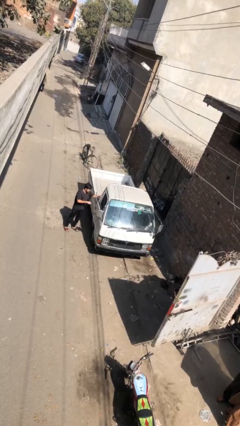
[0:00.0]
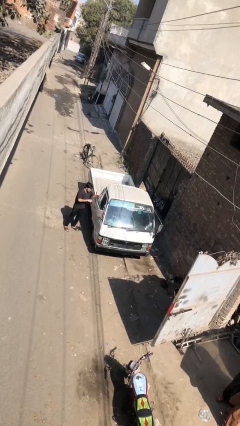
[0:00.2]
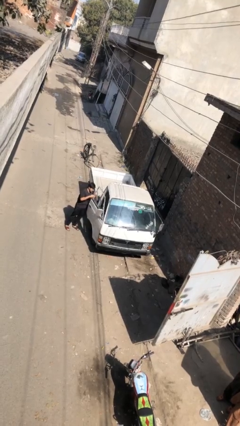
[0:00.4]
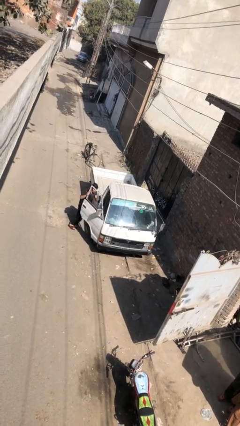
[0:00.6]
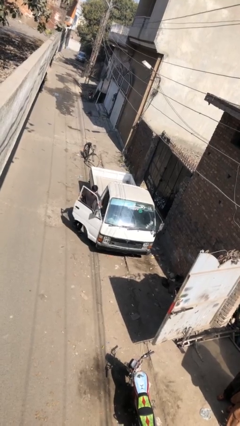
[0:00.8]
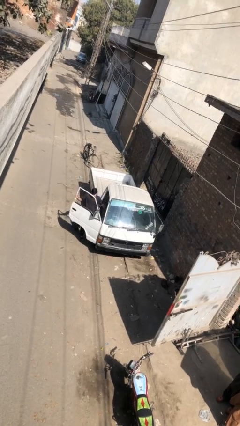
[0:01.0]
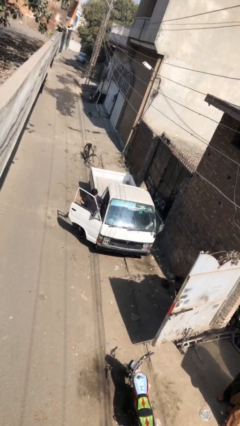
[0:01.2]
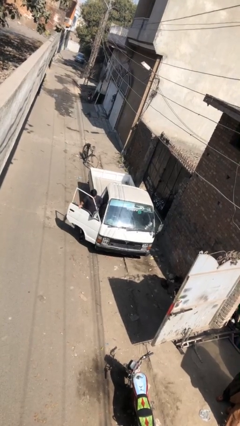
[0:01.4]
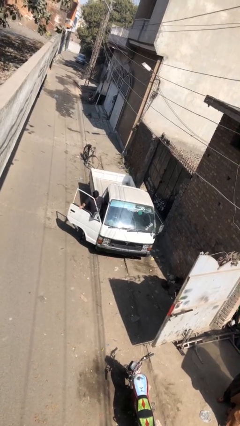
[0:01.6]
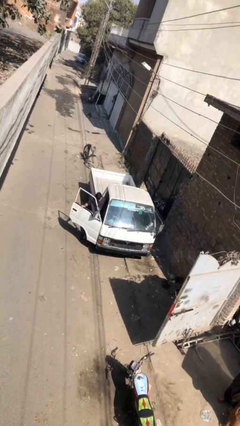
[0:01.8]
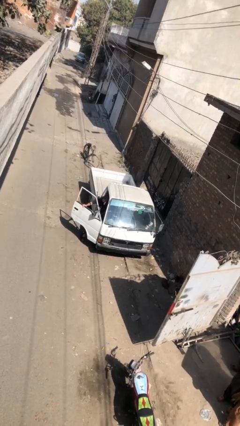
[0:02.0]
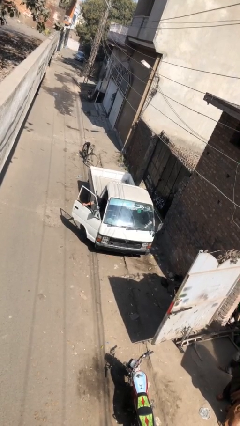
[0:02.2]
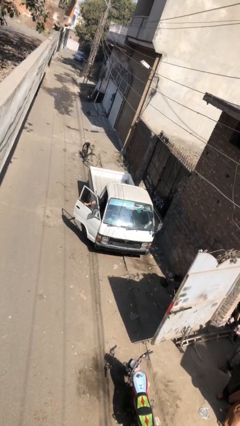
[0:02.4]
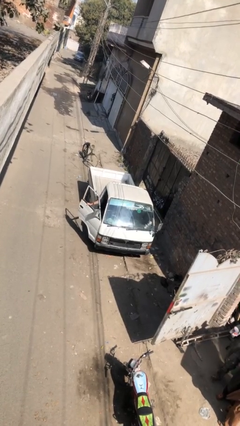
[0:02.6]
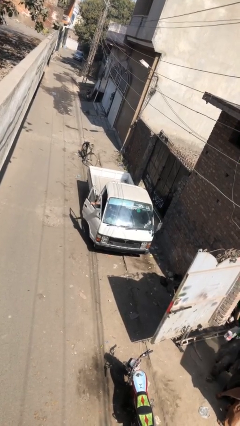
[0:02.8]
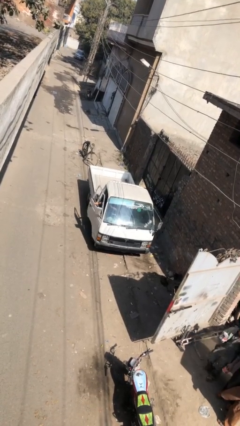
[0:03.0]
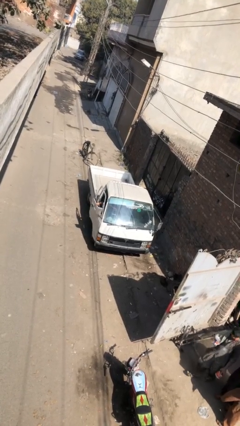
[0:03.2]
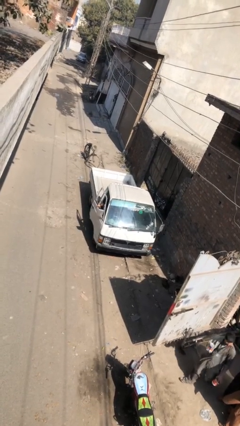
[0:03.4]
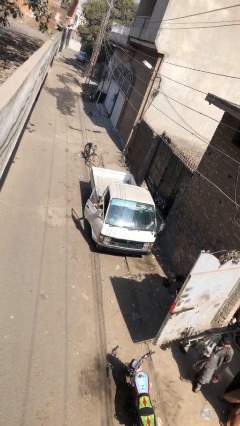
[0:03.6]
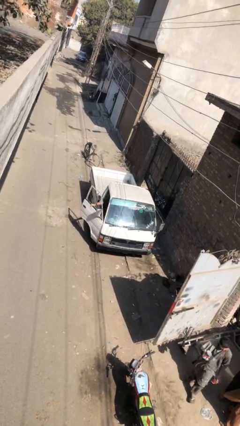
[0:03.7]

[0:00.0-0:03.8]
car picks up person

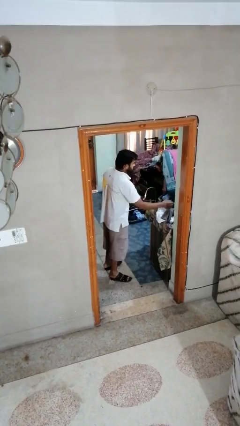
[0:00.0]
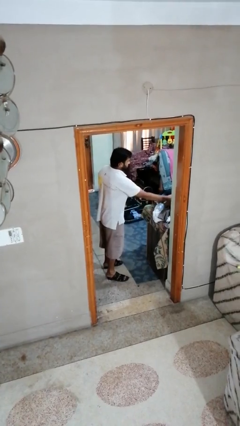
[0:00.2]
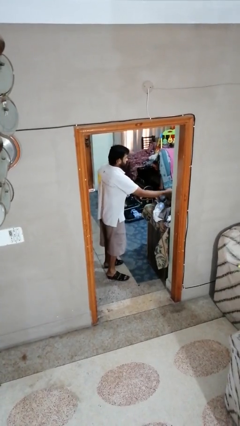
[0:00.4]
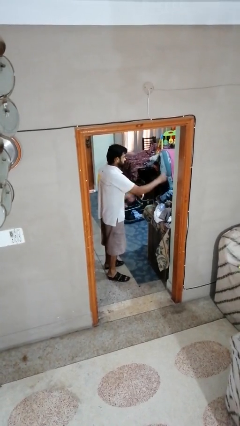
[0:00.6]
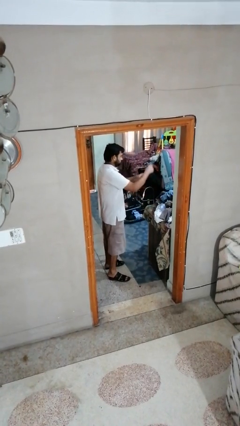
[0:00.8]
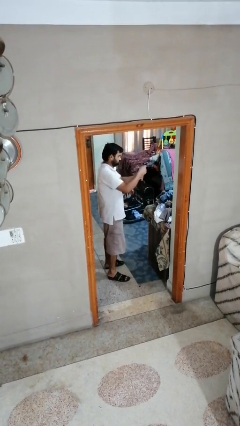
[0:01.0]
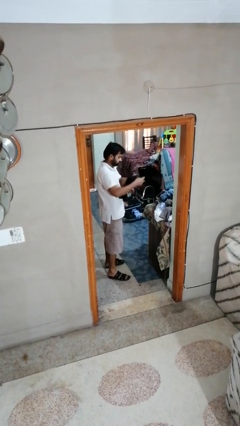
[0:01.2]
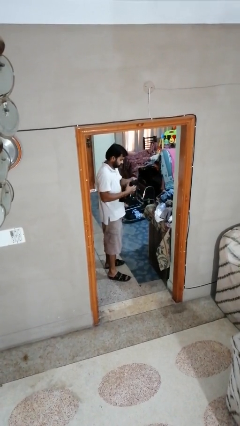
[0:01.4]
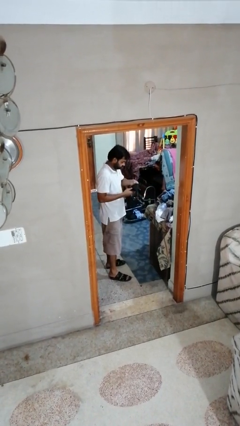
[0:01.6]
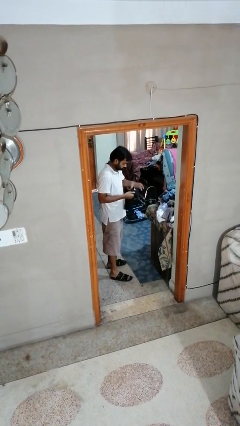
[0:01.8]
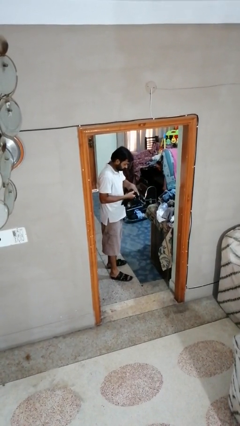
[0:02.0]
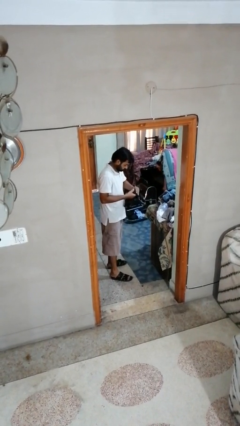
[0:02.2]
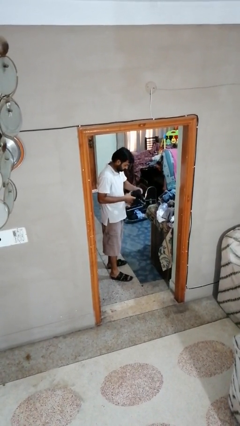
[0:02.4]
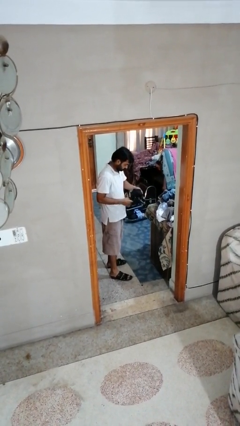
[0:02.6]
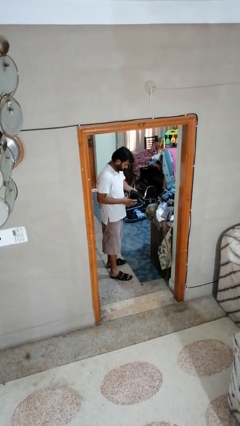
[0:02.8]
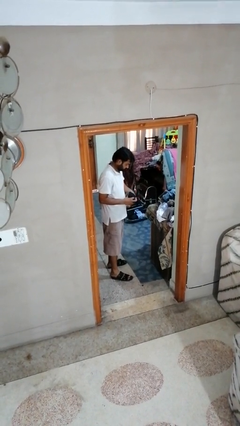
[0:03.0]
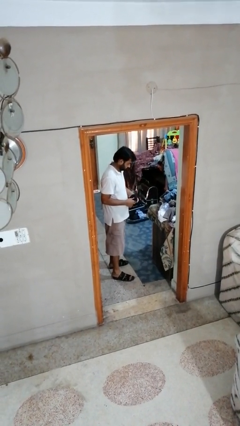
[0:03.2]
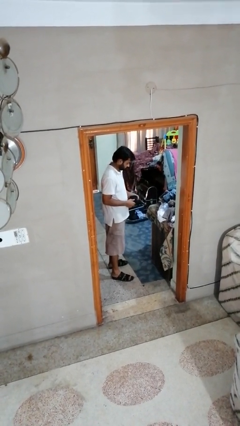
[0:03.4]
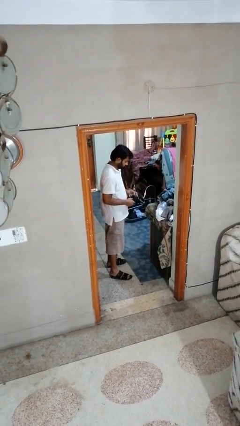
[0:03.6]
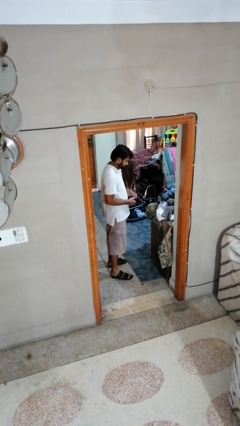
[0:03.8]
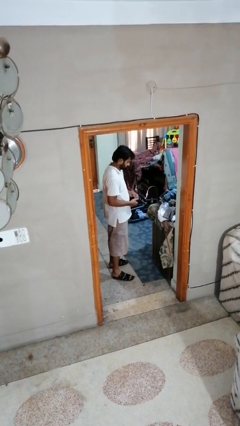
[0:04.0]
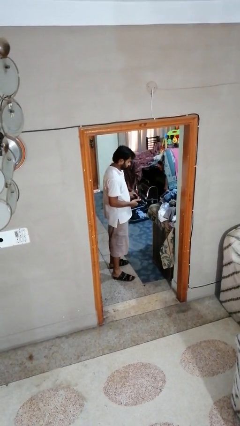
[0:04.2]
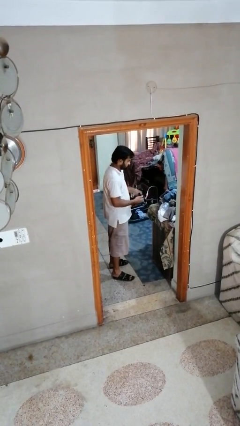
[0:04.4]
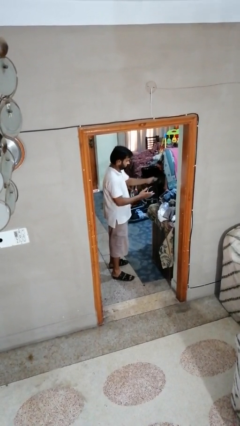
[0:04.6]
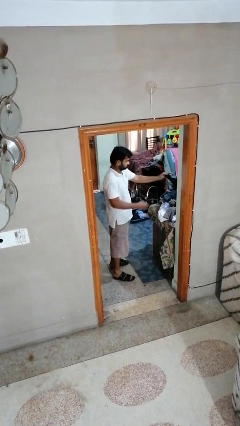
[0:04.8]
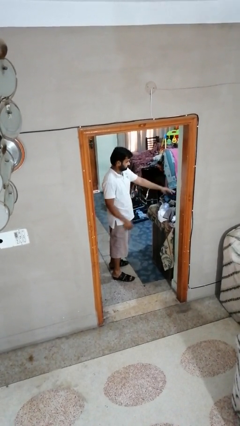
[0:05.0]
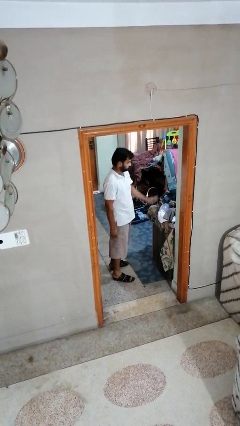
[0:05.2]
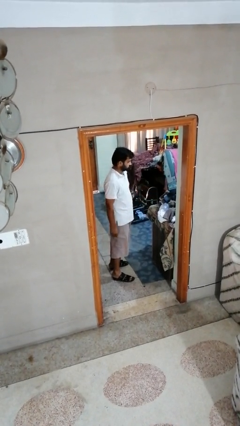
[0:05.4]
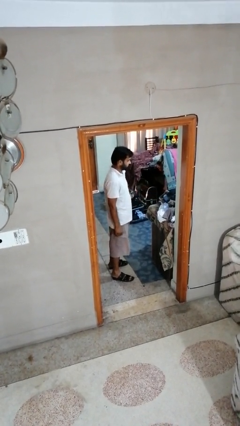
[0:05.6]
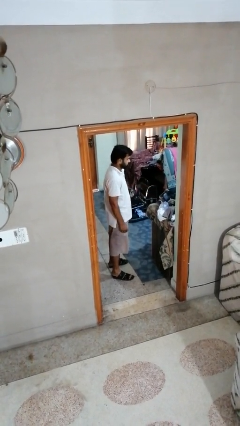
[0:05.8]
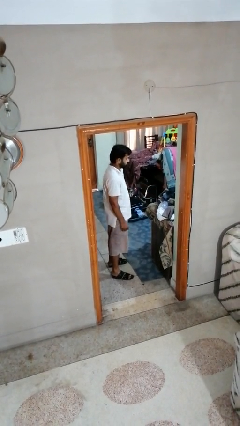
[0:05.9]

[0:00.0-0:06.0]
person folds socks

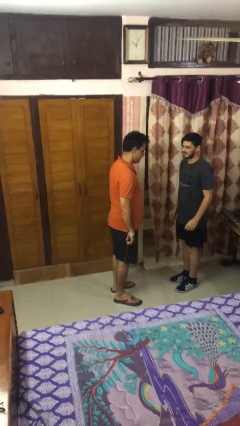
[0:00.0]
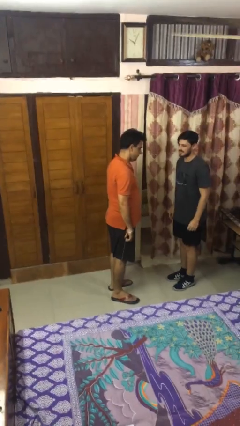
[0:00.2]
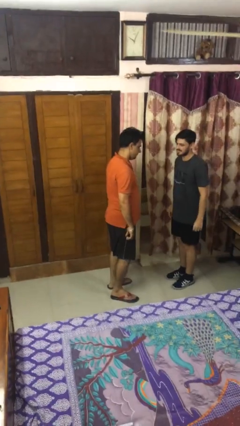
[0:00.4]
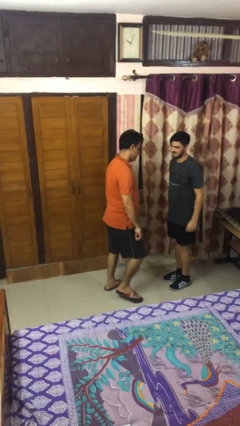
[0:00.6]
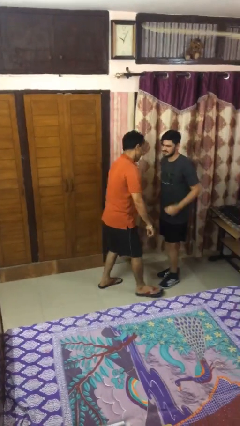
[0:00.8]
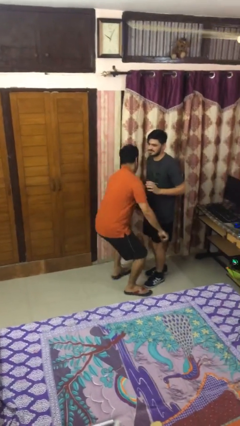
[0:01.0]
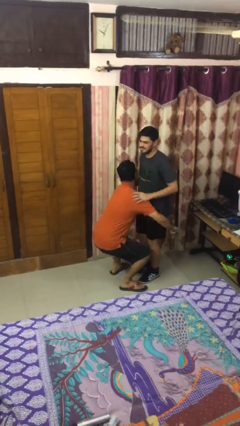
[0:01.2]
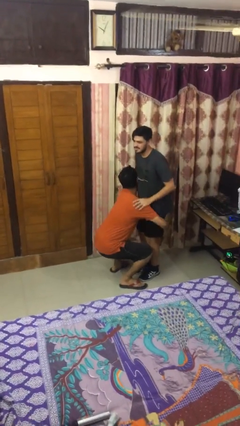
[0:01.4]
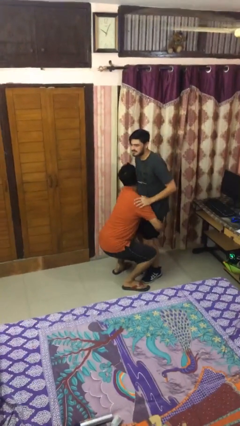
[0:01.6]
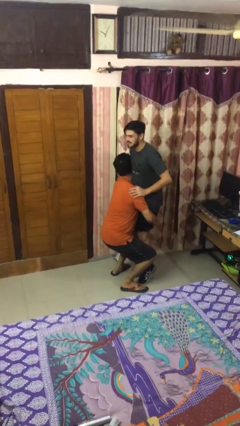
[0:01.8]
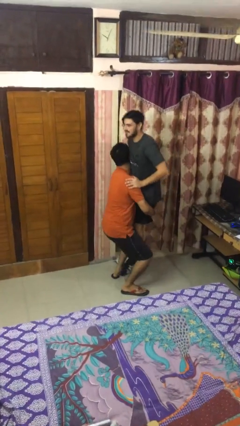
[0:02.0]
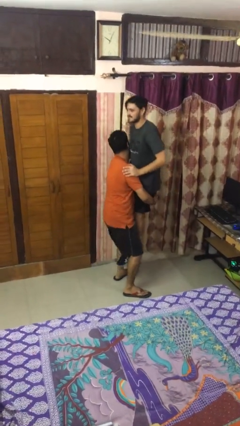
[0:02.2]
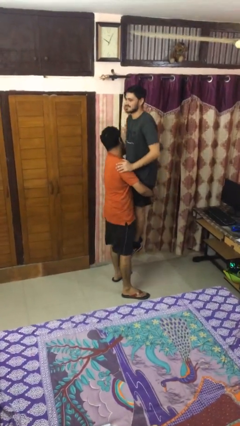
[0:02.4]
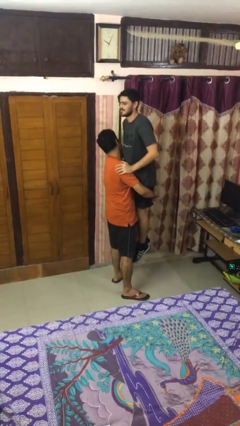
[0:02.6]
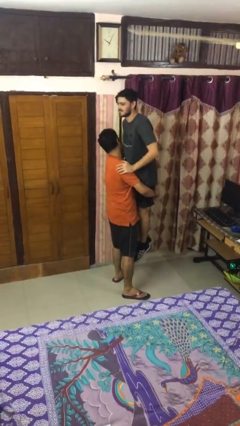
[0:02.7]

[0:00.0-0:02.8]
person picks up person

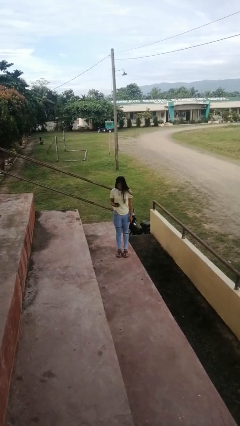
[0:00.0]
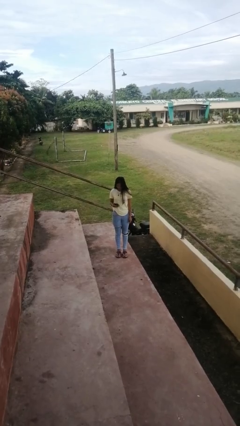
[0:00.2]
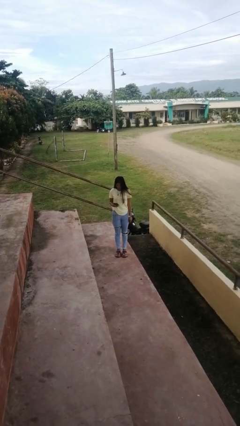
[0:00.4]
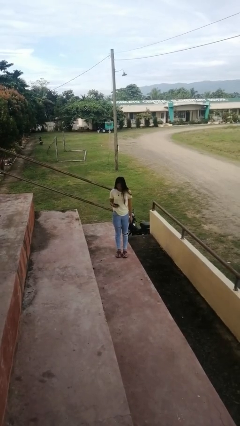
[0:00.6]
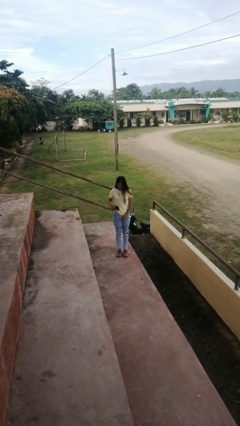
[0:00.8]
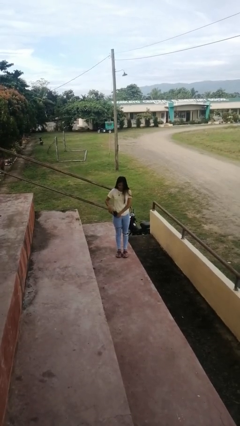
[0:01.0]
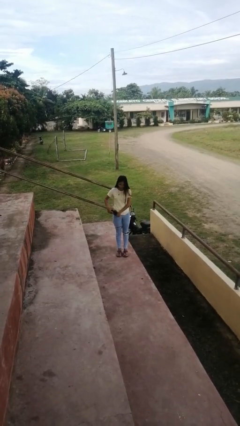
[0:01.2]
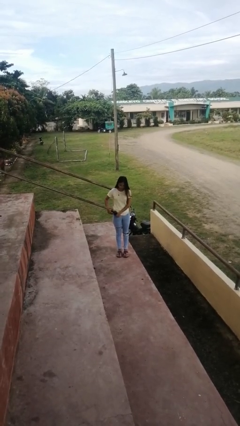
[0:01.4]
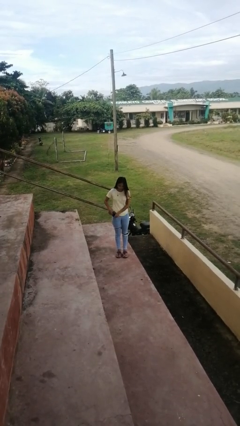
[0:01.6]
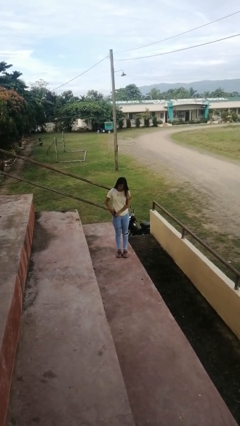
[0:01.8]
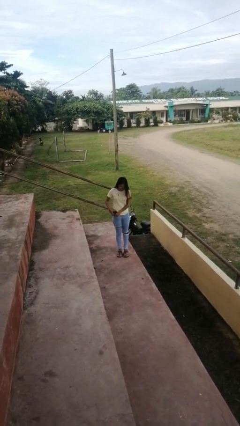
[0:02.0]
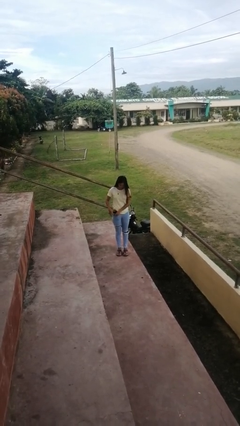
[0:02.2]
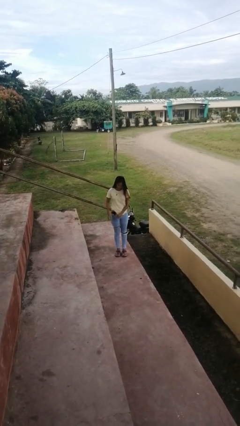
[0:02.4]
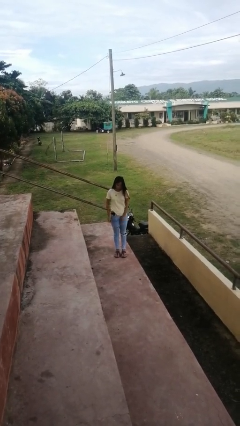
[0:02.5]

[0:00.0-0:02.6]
person puts phone into pocket

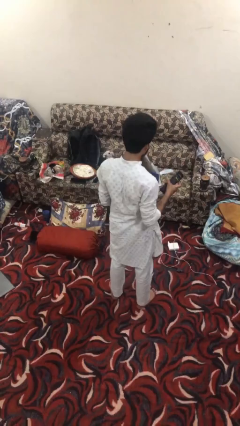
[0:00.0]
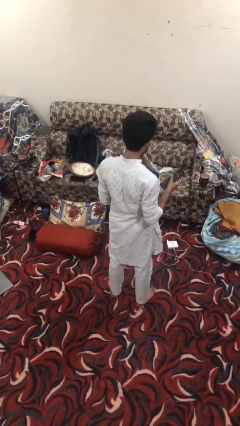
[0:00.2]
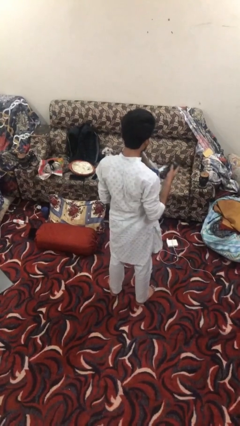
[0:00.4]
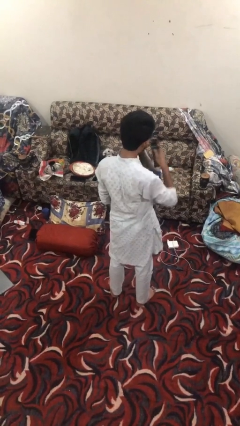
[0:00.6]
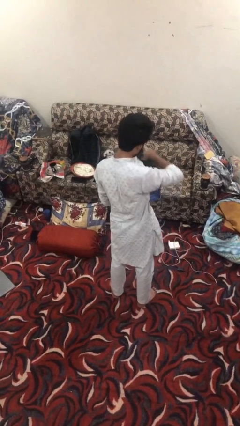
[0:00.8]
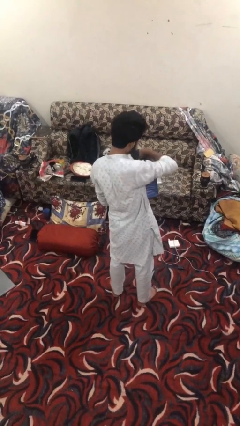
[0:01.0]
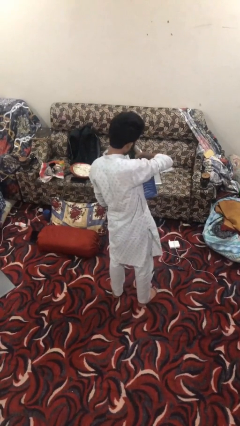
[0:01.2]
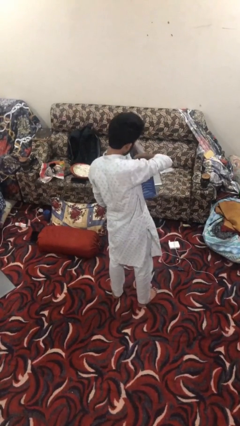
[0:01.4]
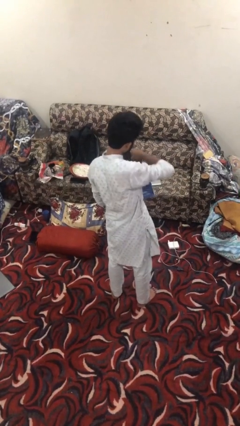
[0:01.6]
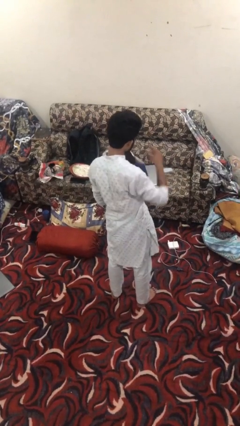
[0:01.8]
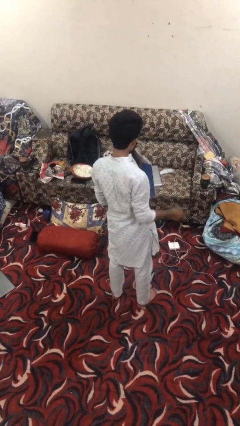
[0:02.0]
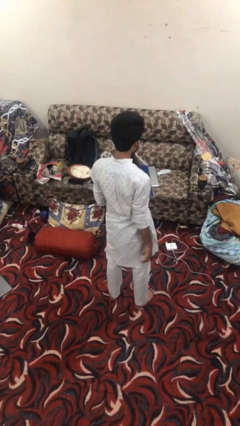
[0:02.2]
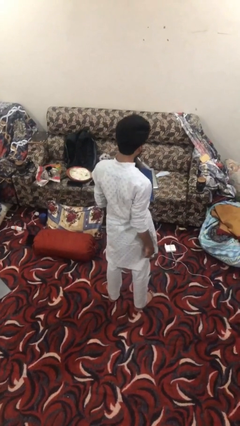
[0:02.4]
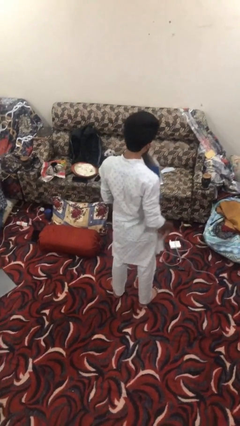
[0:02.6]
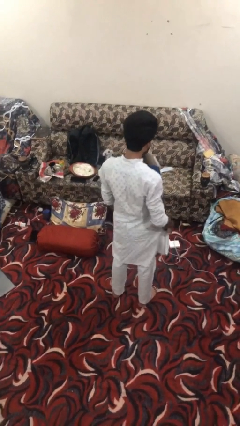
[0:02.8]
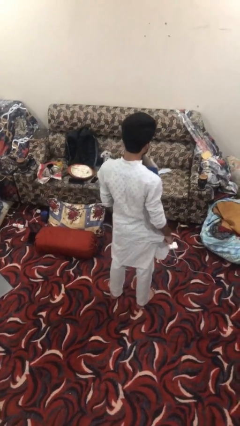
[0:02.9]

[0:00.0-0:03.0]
person puts object into bag
